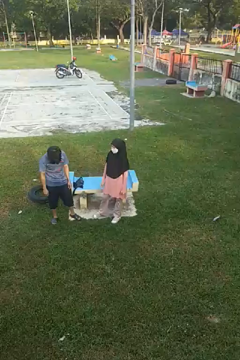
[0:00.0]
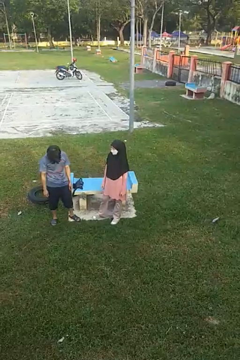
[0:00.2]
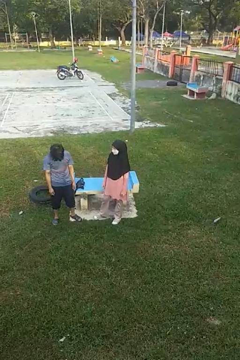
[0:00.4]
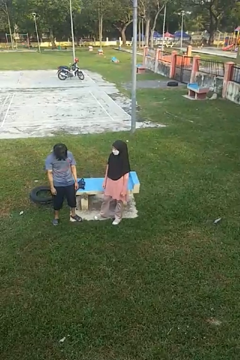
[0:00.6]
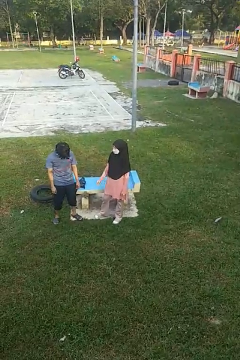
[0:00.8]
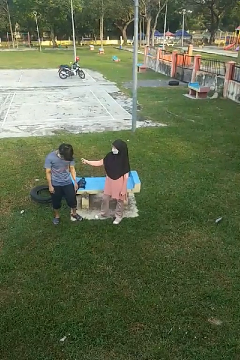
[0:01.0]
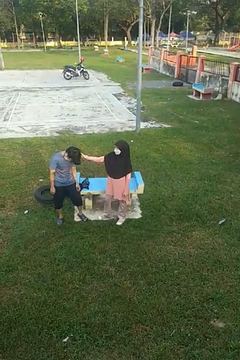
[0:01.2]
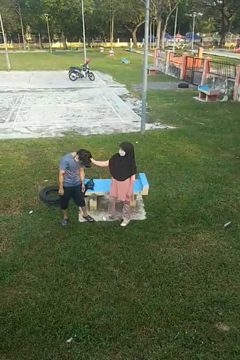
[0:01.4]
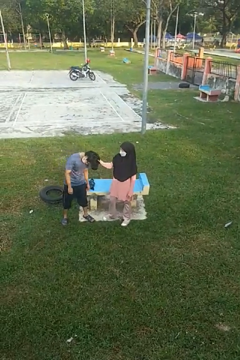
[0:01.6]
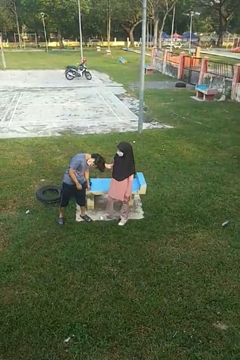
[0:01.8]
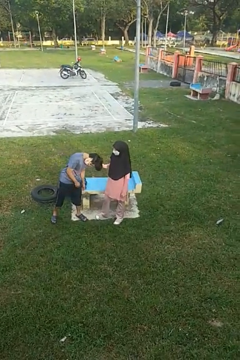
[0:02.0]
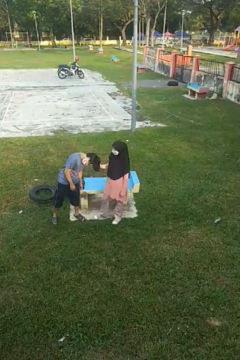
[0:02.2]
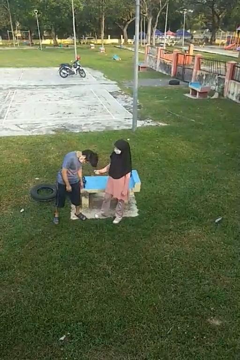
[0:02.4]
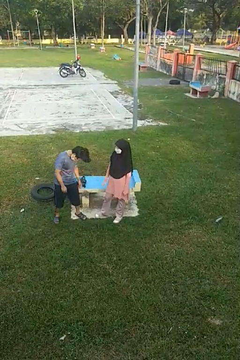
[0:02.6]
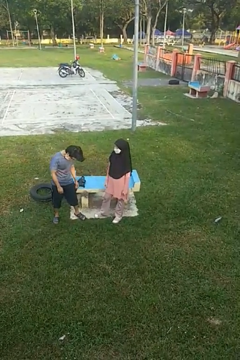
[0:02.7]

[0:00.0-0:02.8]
person grabs person by hair

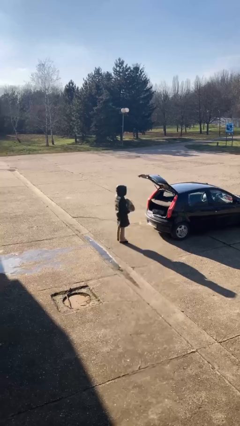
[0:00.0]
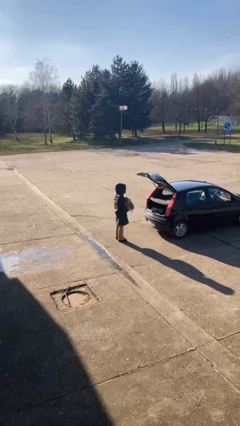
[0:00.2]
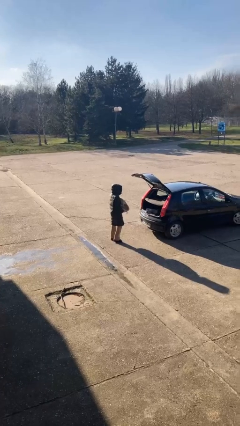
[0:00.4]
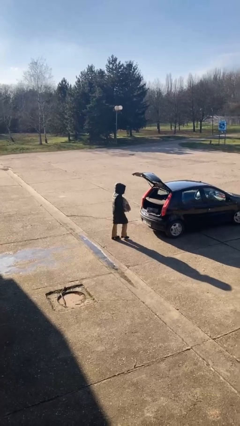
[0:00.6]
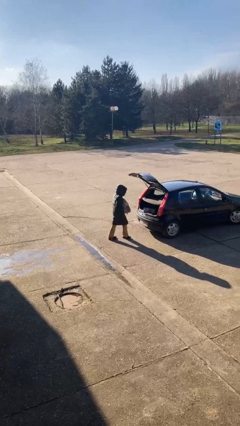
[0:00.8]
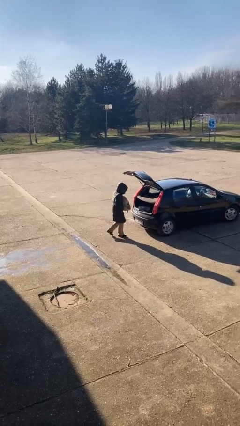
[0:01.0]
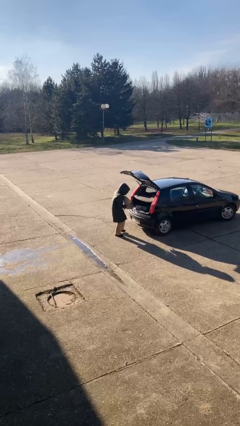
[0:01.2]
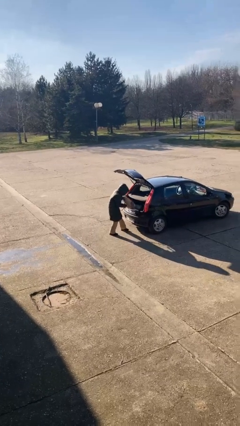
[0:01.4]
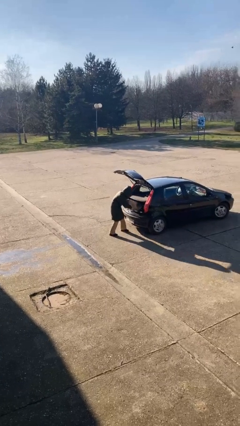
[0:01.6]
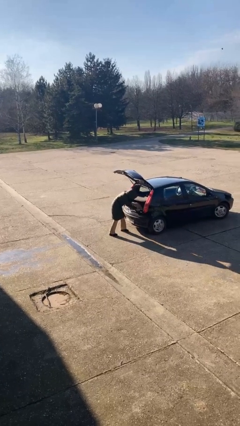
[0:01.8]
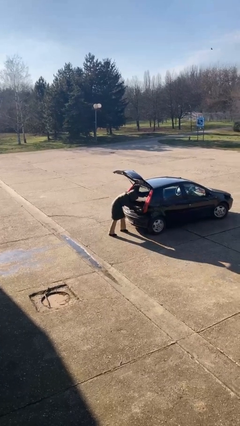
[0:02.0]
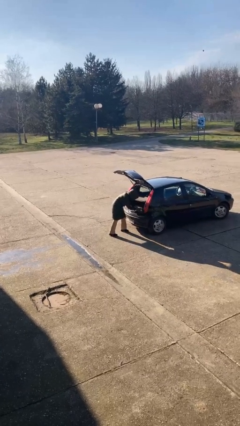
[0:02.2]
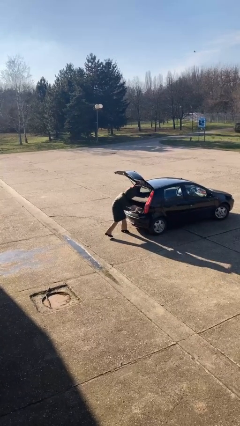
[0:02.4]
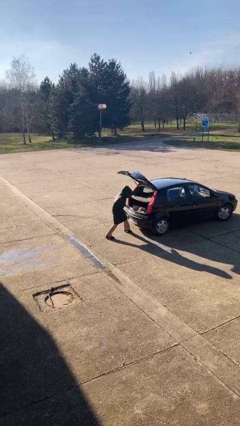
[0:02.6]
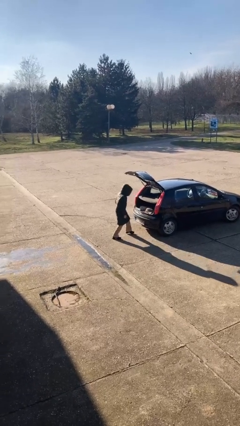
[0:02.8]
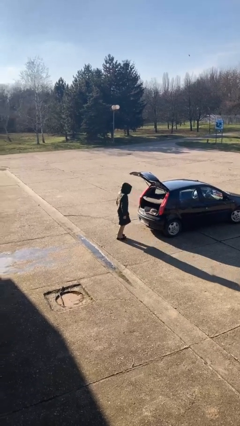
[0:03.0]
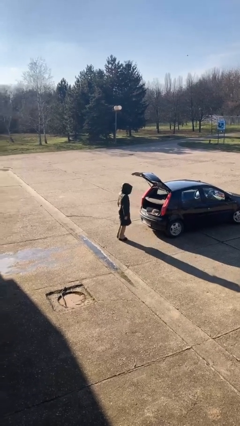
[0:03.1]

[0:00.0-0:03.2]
person loads car

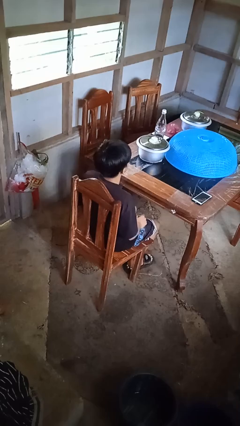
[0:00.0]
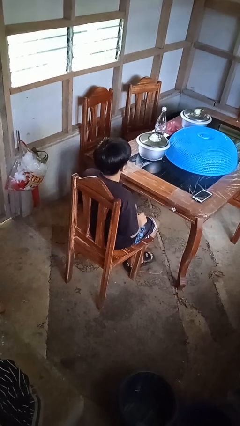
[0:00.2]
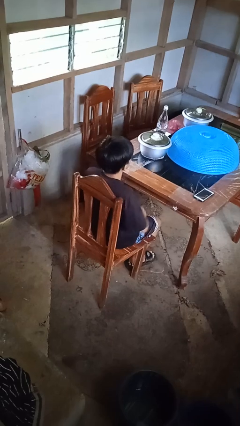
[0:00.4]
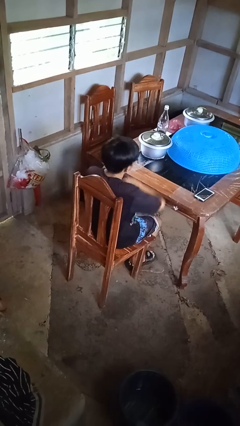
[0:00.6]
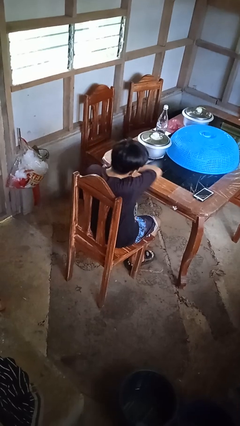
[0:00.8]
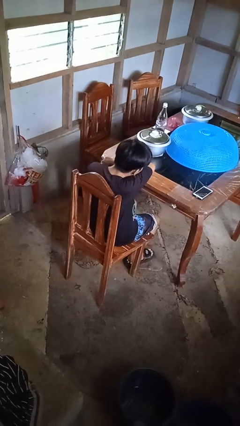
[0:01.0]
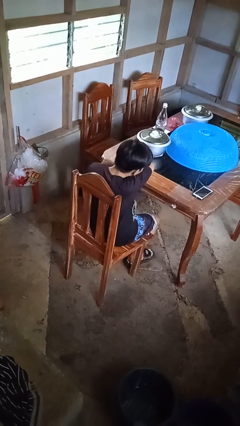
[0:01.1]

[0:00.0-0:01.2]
person sneezes into arm

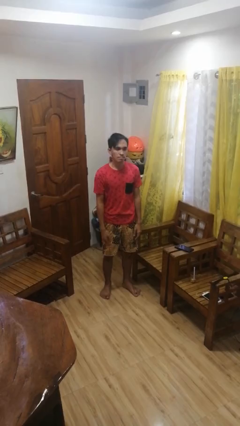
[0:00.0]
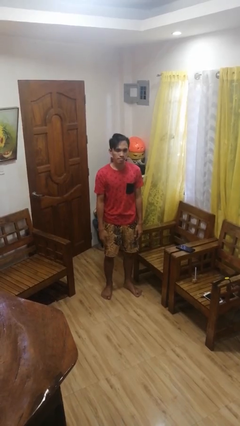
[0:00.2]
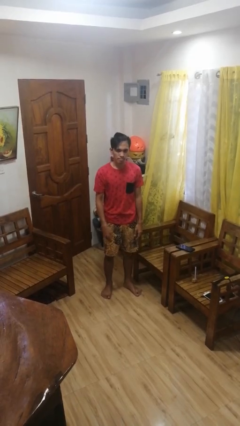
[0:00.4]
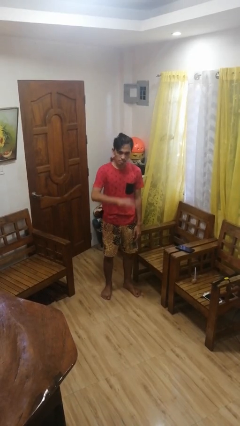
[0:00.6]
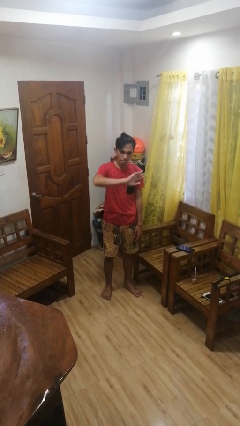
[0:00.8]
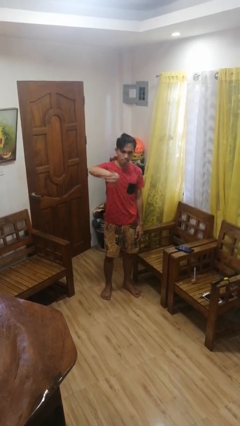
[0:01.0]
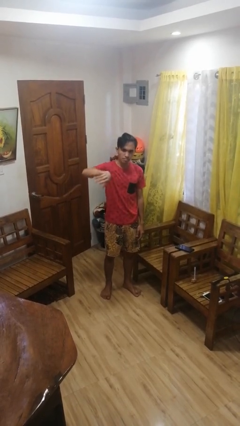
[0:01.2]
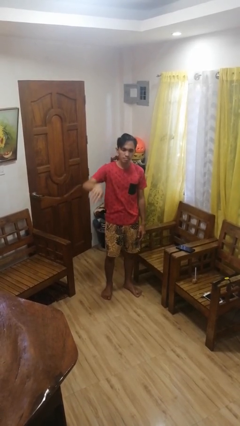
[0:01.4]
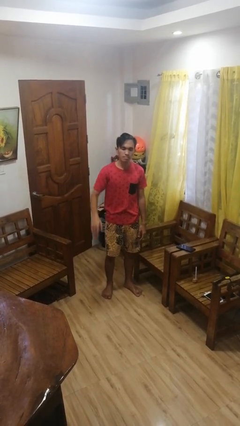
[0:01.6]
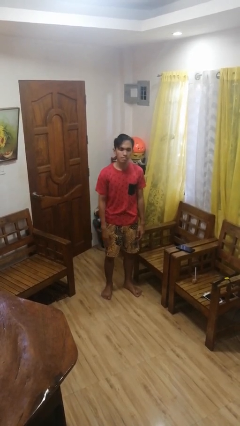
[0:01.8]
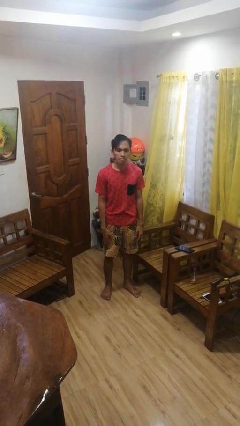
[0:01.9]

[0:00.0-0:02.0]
person gestures swipe right

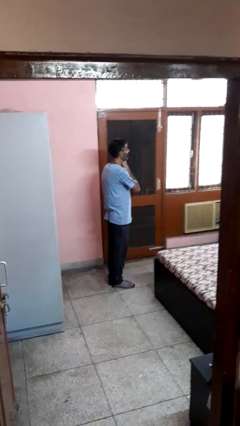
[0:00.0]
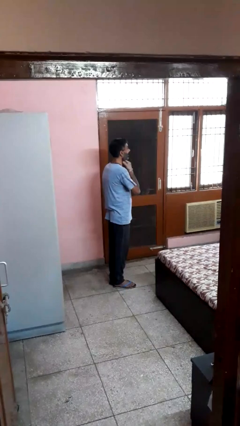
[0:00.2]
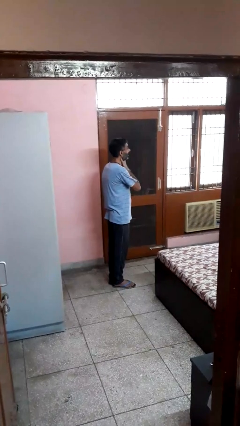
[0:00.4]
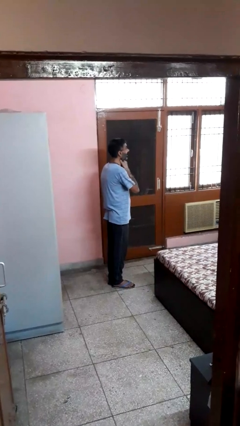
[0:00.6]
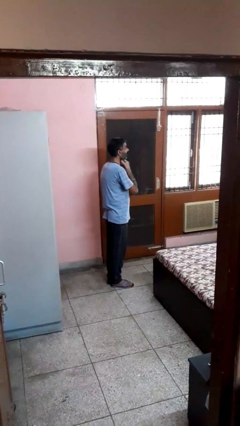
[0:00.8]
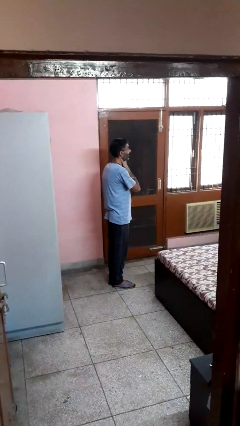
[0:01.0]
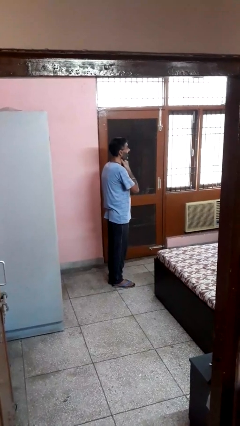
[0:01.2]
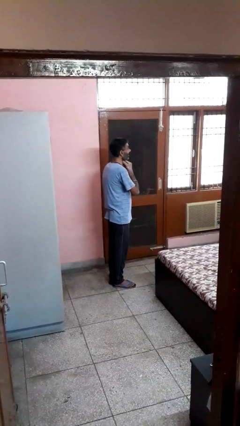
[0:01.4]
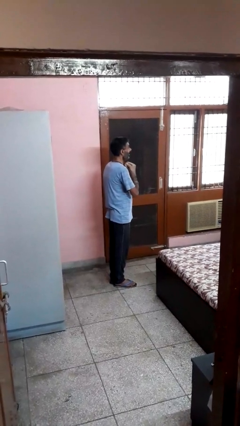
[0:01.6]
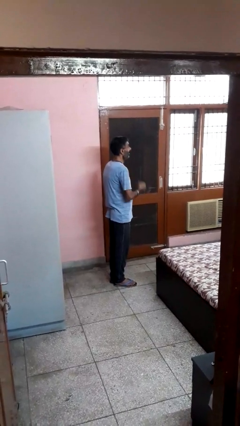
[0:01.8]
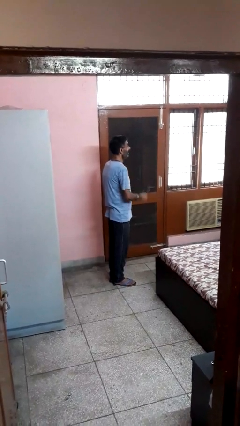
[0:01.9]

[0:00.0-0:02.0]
person rubs neck

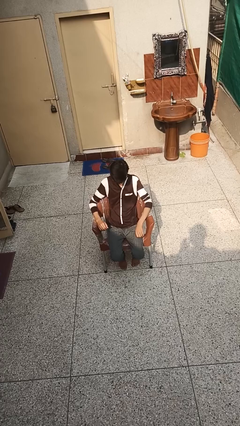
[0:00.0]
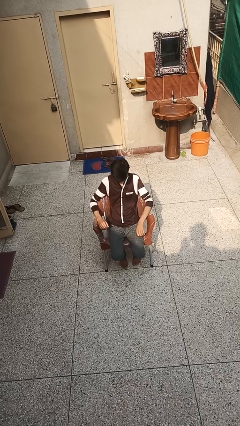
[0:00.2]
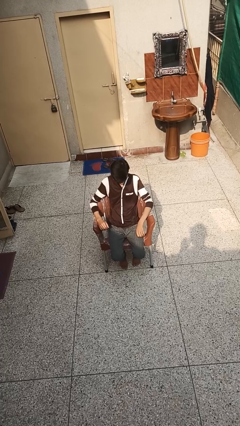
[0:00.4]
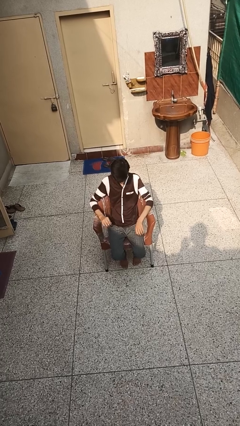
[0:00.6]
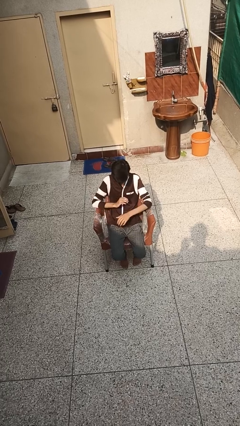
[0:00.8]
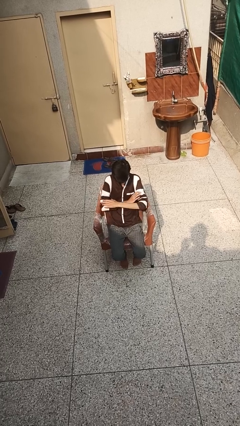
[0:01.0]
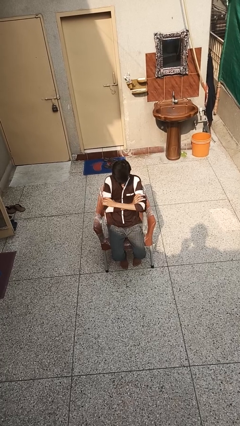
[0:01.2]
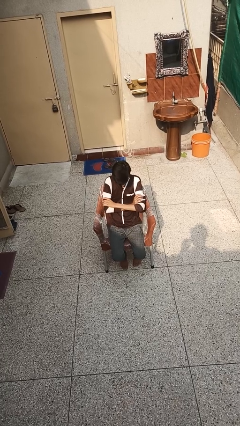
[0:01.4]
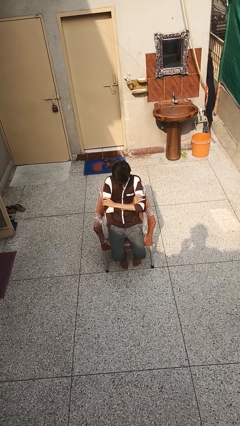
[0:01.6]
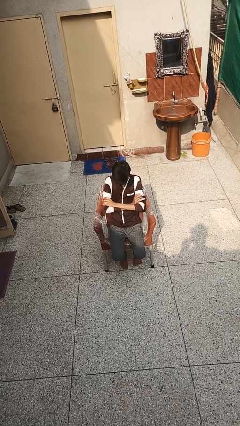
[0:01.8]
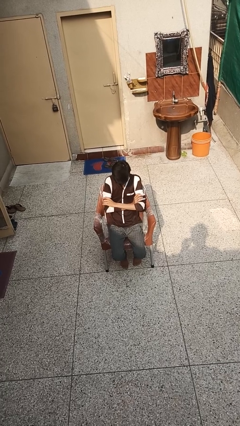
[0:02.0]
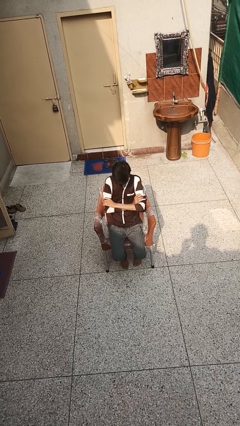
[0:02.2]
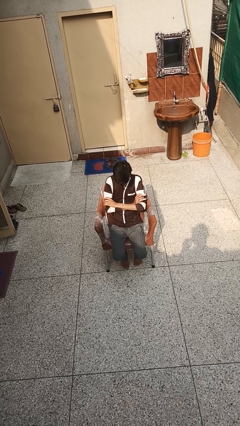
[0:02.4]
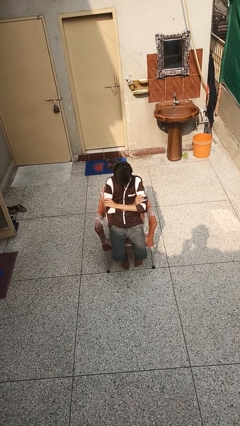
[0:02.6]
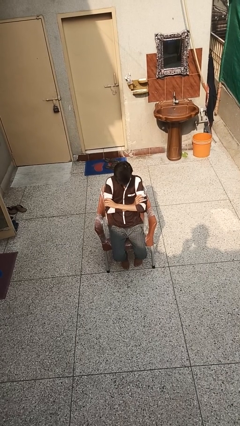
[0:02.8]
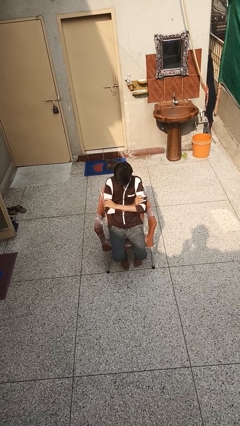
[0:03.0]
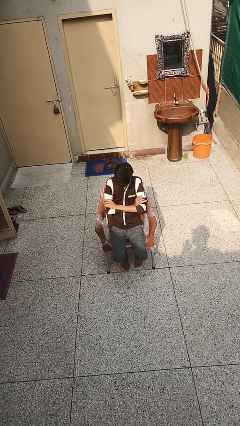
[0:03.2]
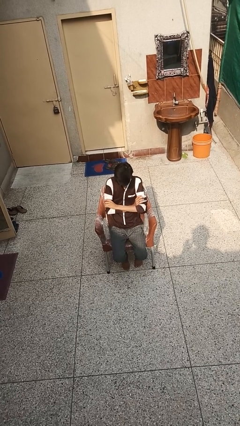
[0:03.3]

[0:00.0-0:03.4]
person crosses arms

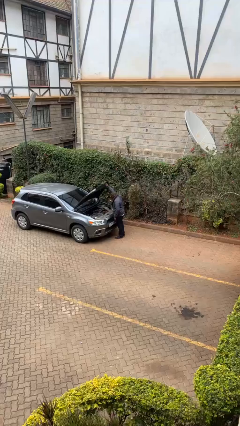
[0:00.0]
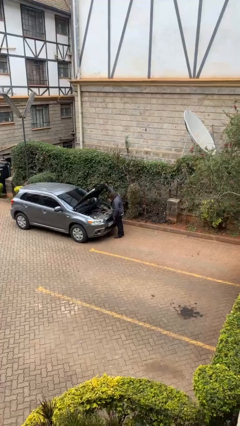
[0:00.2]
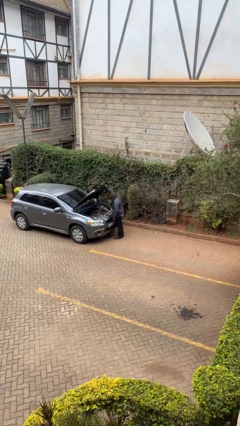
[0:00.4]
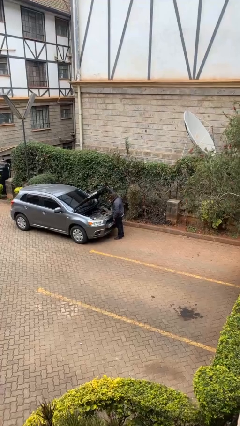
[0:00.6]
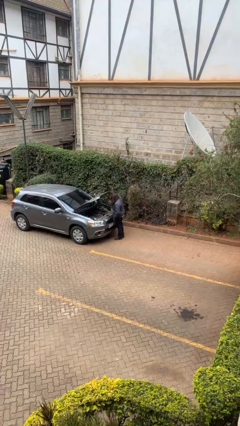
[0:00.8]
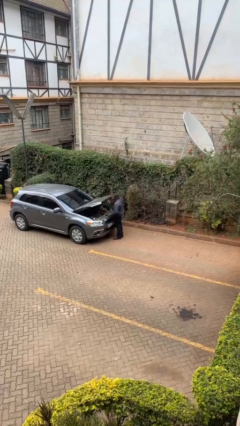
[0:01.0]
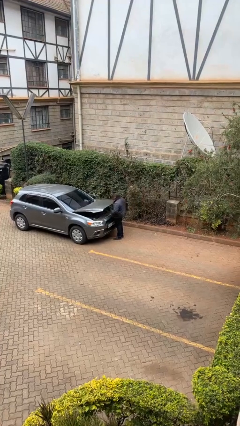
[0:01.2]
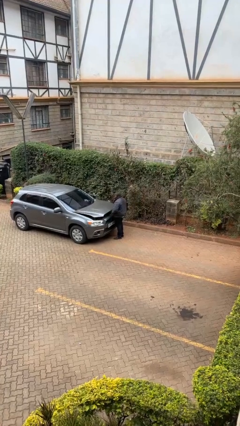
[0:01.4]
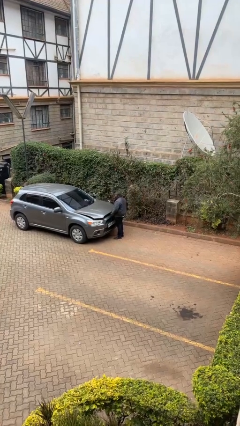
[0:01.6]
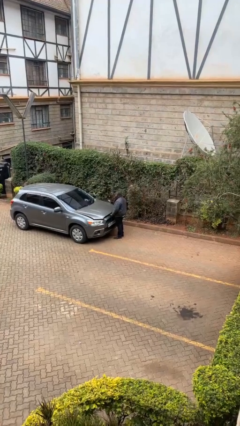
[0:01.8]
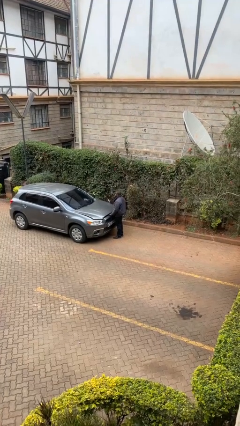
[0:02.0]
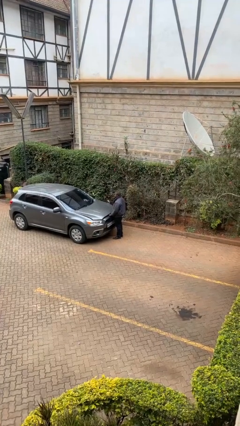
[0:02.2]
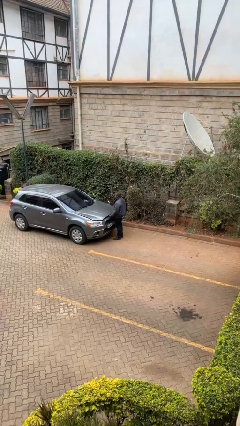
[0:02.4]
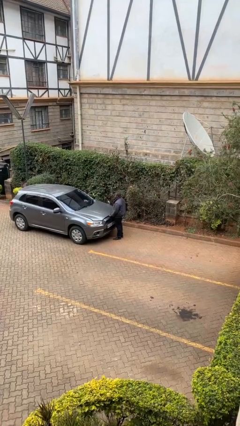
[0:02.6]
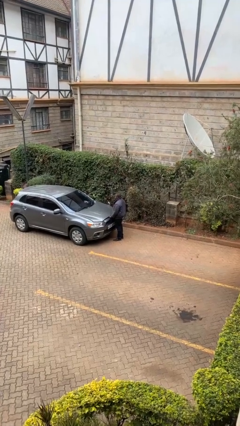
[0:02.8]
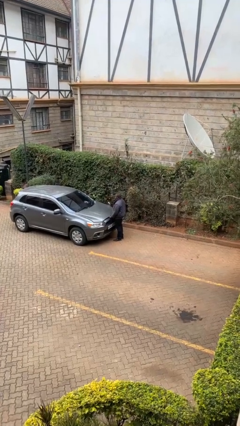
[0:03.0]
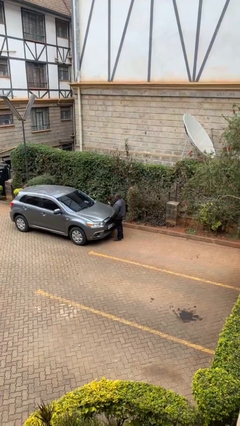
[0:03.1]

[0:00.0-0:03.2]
person closes car hood

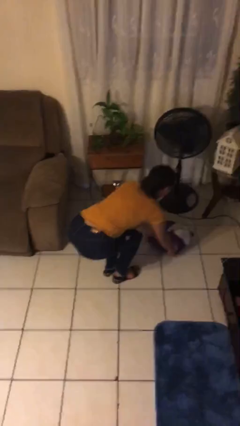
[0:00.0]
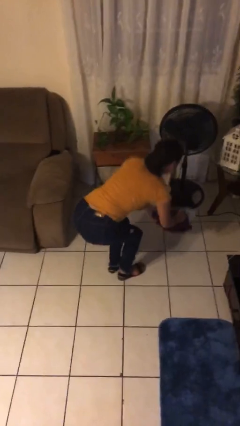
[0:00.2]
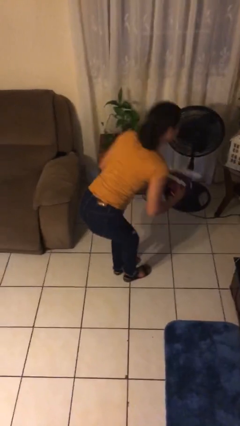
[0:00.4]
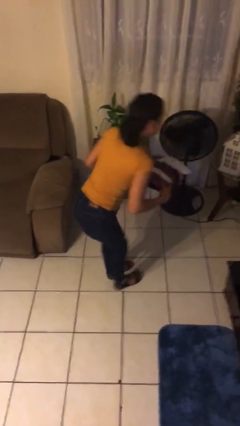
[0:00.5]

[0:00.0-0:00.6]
person picks up object from floor
